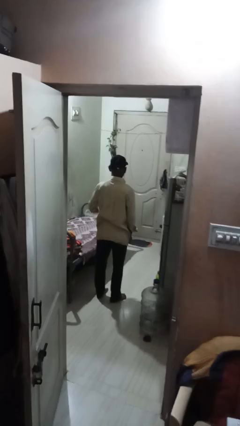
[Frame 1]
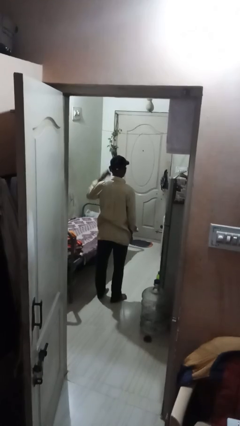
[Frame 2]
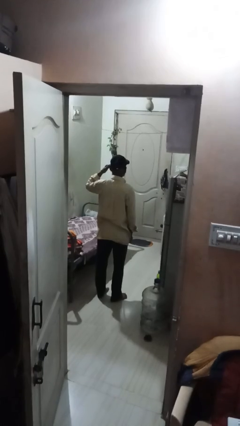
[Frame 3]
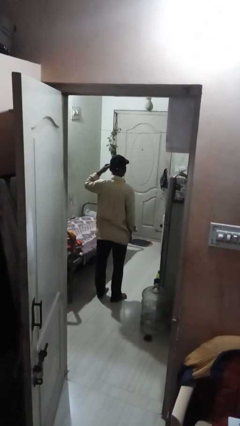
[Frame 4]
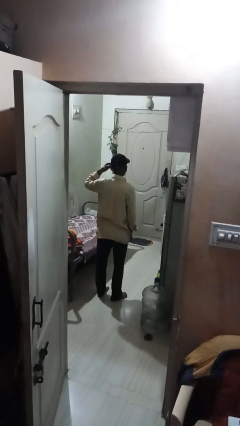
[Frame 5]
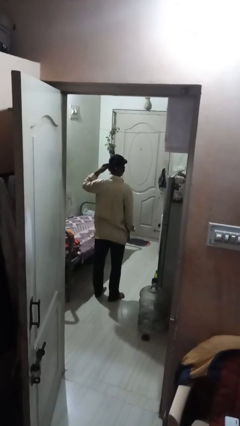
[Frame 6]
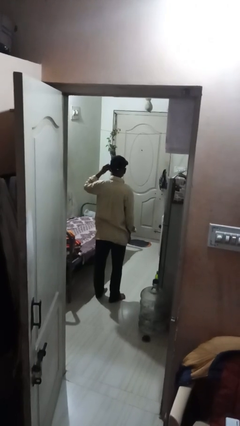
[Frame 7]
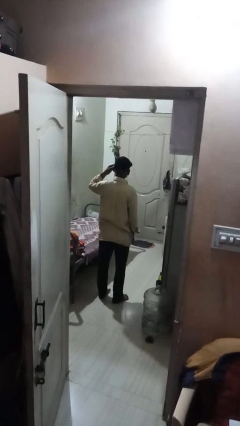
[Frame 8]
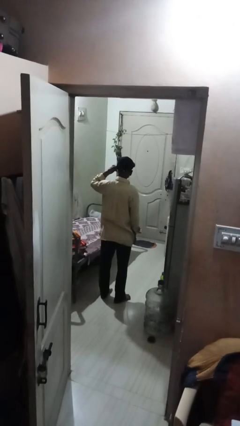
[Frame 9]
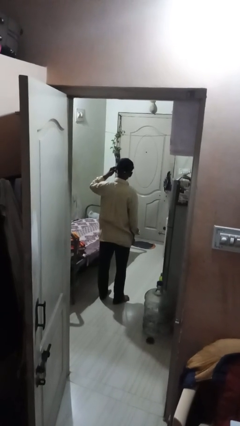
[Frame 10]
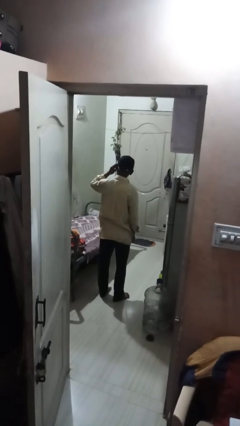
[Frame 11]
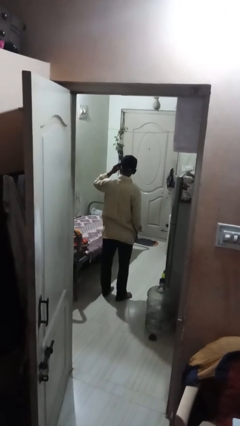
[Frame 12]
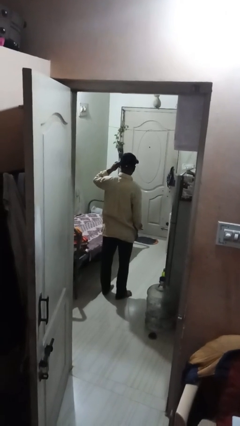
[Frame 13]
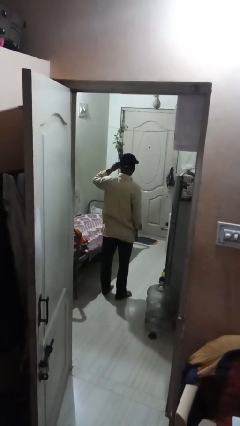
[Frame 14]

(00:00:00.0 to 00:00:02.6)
person touches earlobe

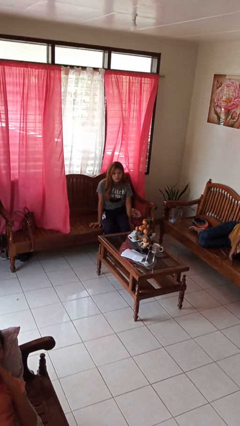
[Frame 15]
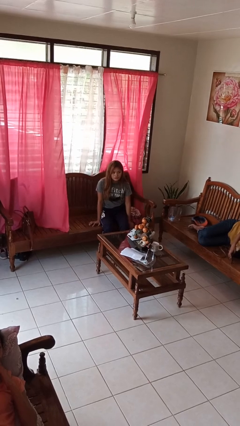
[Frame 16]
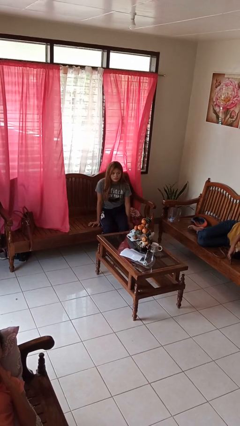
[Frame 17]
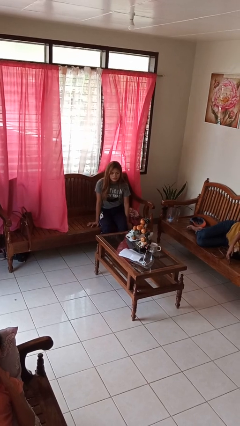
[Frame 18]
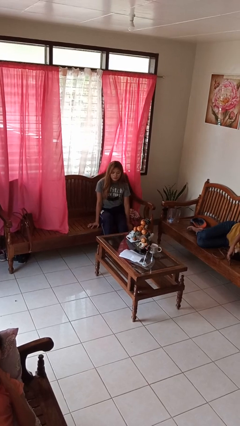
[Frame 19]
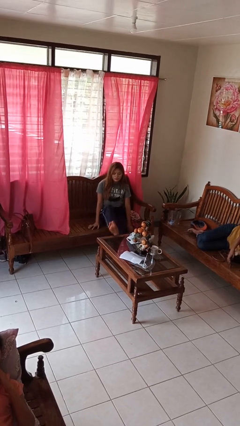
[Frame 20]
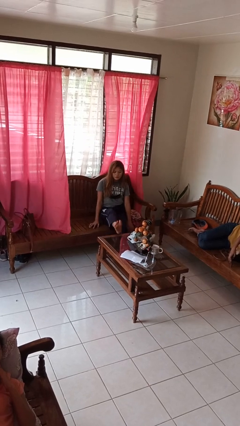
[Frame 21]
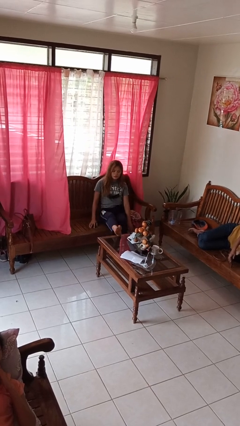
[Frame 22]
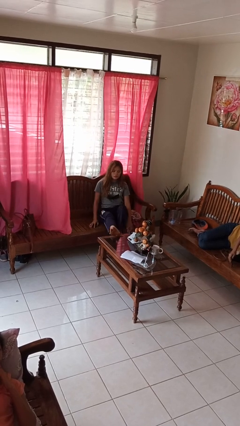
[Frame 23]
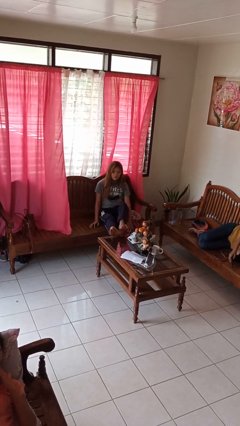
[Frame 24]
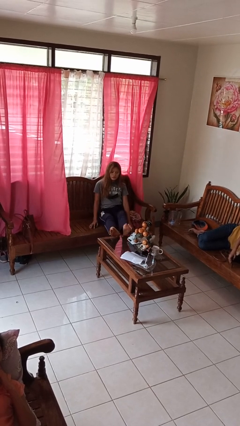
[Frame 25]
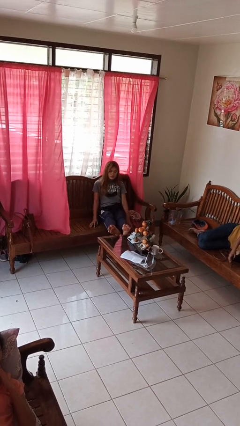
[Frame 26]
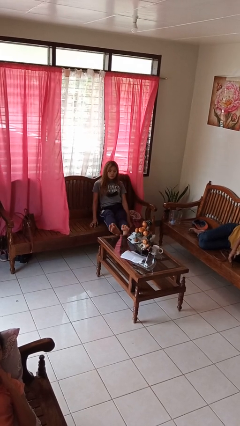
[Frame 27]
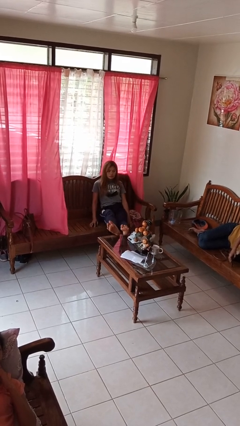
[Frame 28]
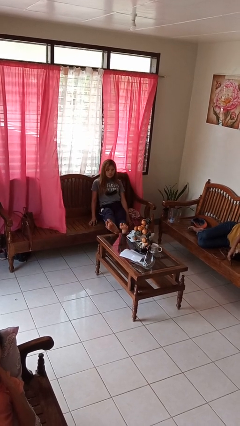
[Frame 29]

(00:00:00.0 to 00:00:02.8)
person puts feet up

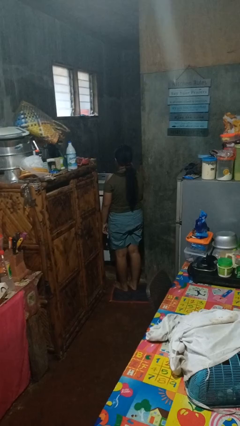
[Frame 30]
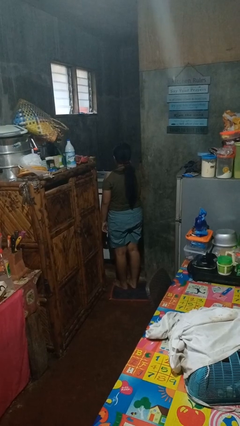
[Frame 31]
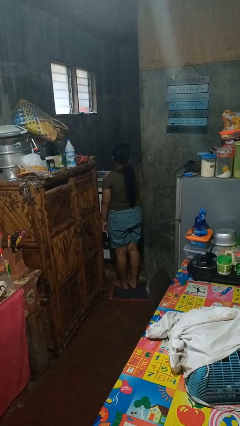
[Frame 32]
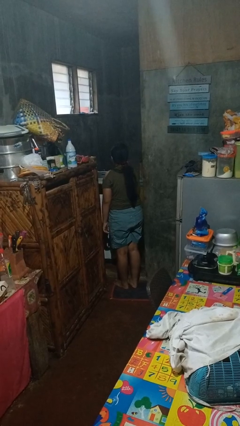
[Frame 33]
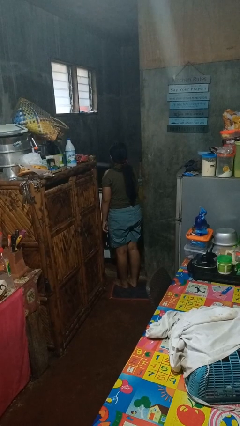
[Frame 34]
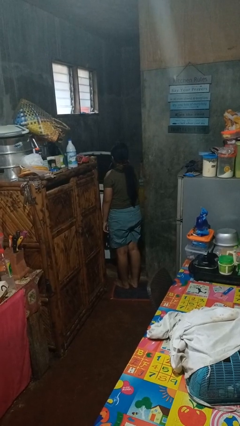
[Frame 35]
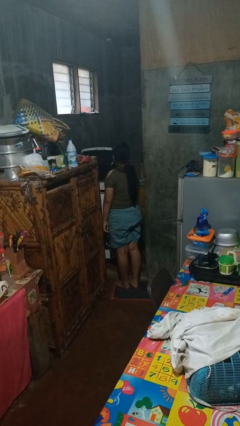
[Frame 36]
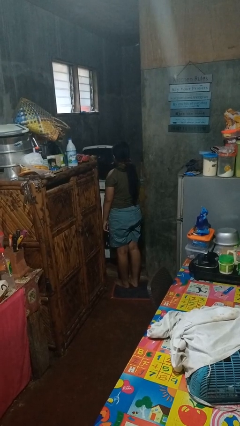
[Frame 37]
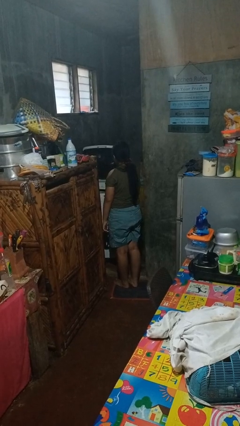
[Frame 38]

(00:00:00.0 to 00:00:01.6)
person opens clothes washer

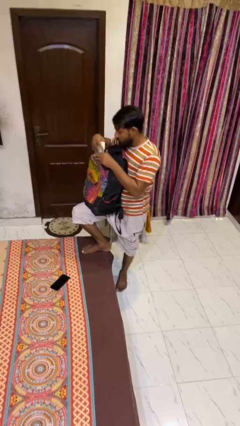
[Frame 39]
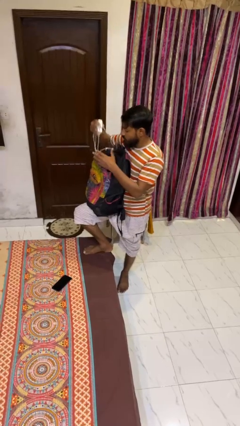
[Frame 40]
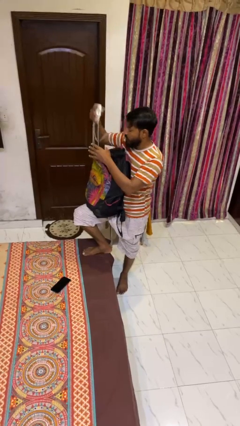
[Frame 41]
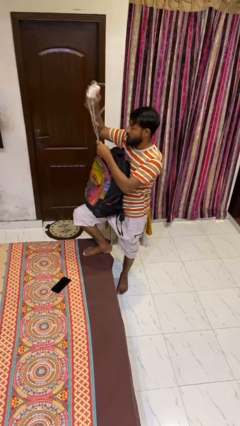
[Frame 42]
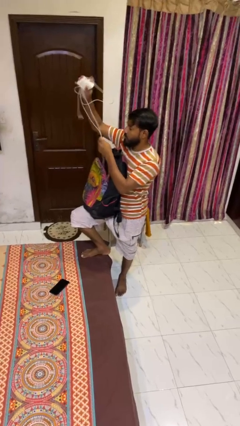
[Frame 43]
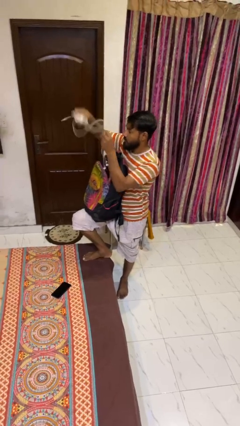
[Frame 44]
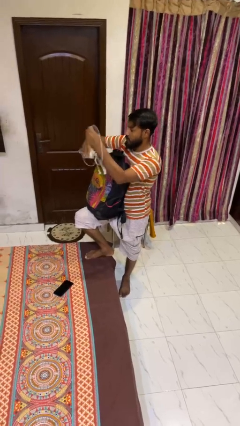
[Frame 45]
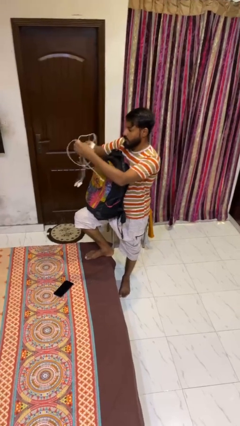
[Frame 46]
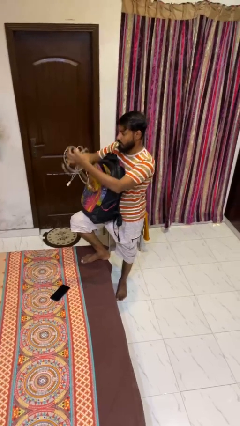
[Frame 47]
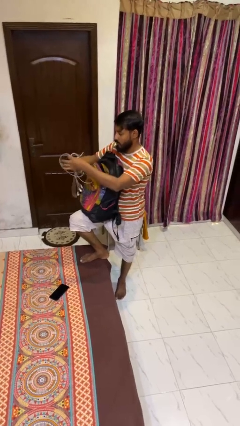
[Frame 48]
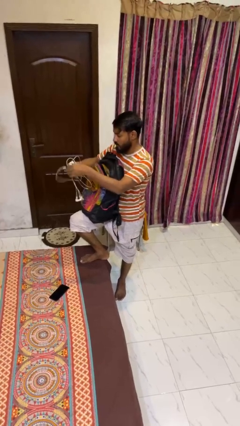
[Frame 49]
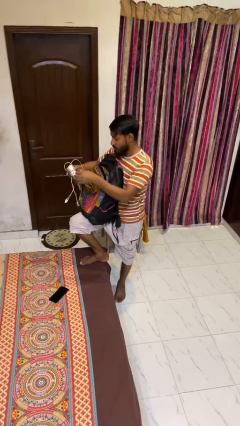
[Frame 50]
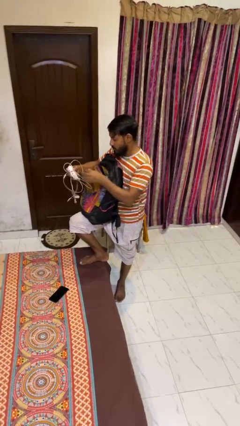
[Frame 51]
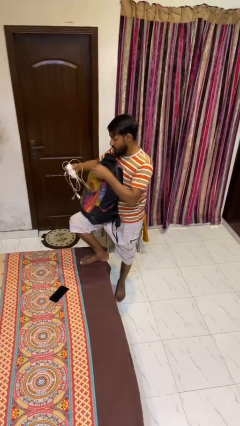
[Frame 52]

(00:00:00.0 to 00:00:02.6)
person takes object from backpack

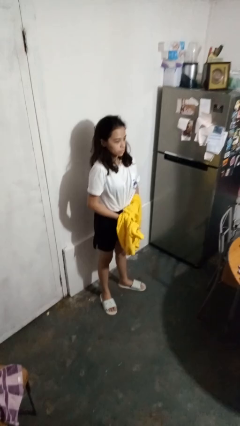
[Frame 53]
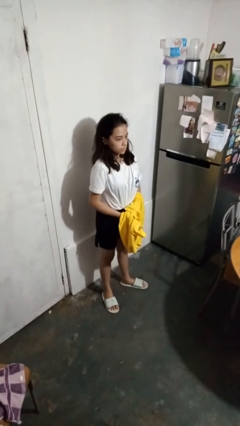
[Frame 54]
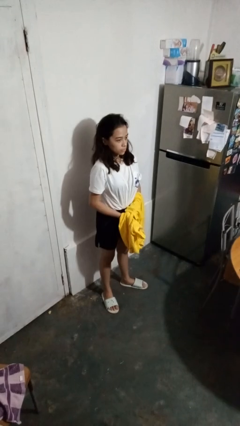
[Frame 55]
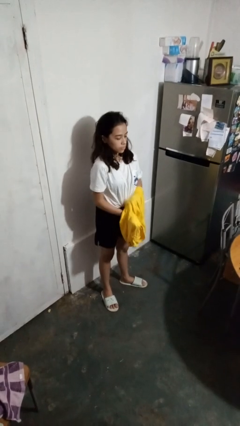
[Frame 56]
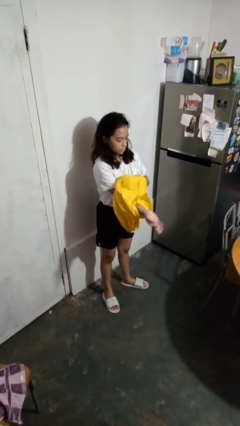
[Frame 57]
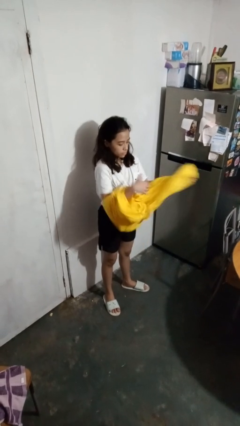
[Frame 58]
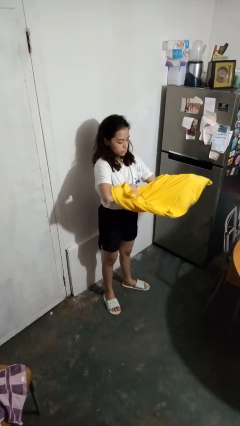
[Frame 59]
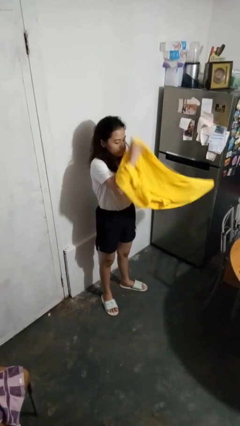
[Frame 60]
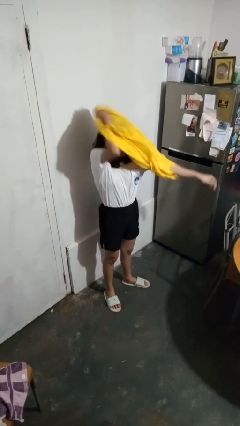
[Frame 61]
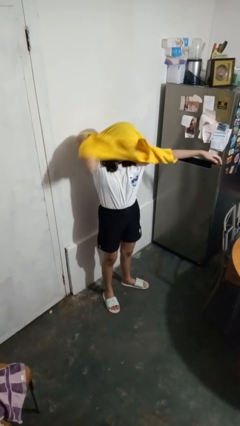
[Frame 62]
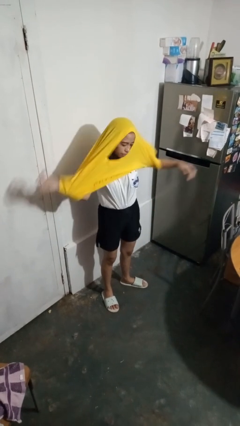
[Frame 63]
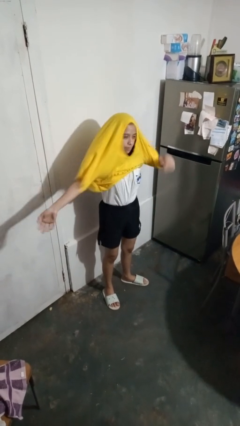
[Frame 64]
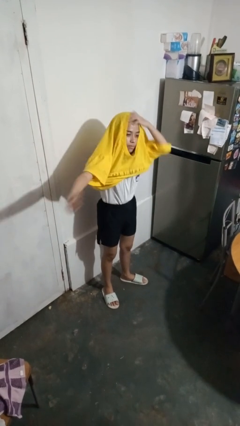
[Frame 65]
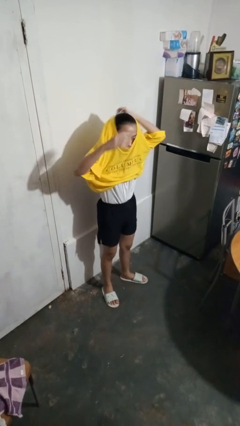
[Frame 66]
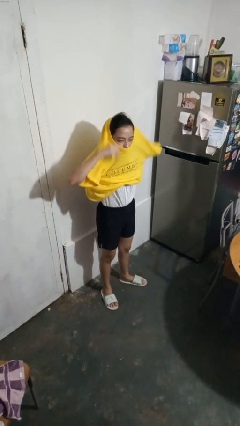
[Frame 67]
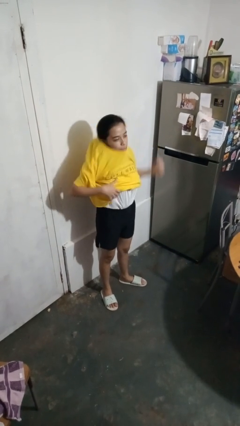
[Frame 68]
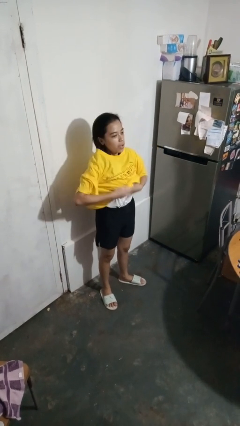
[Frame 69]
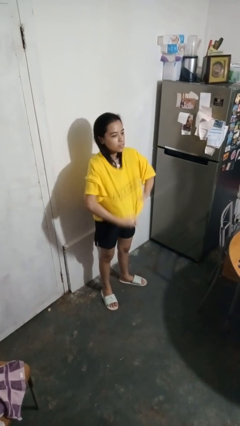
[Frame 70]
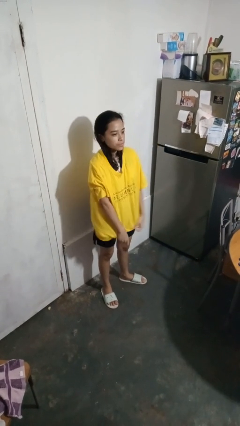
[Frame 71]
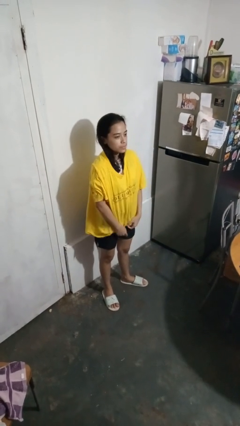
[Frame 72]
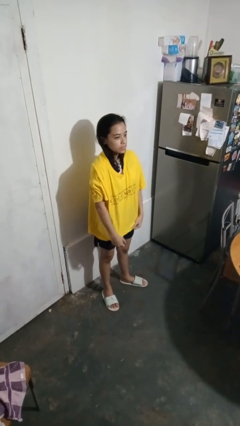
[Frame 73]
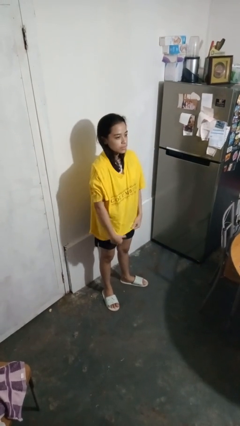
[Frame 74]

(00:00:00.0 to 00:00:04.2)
person puts on shirt

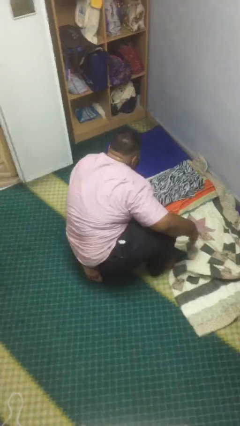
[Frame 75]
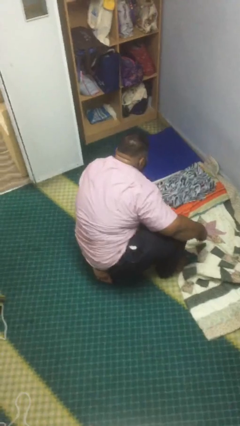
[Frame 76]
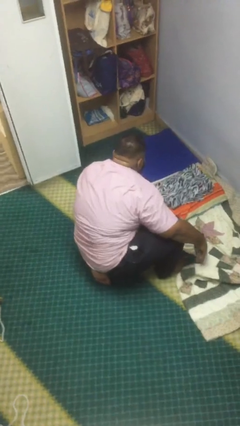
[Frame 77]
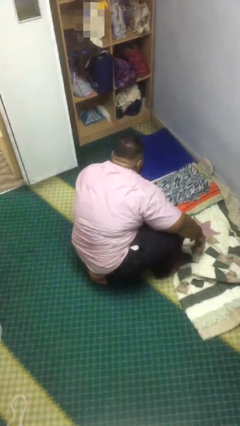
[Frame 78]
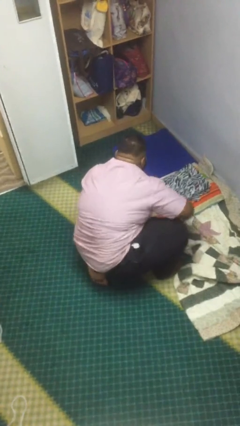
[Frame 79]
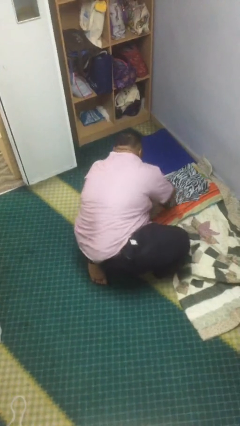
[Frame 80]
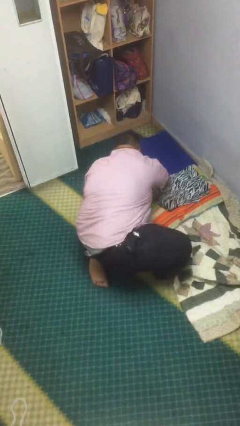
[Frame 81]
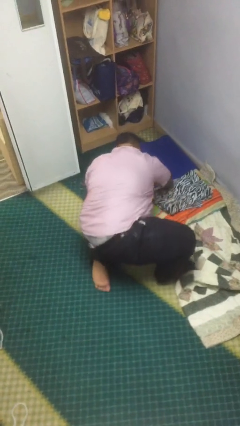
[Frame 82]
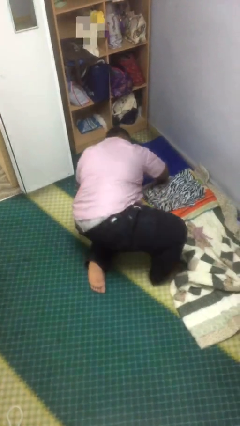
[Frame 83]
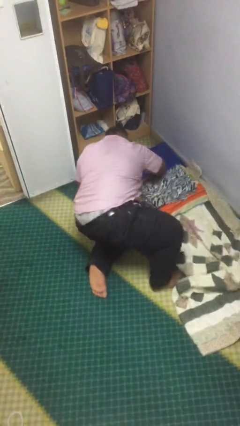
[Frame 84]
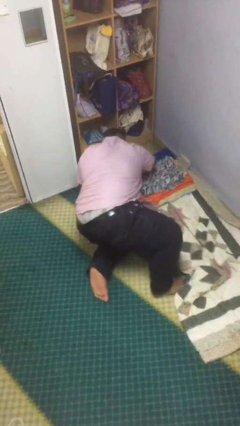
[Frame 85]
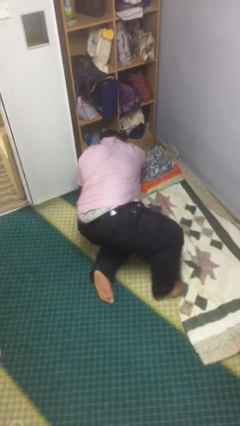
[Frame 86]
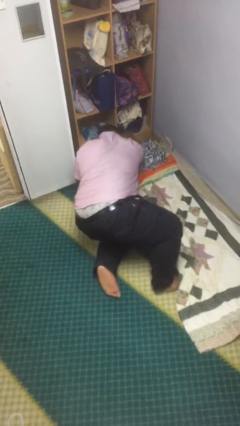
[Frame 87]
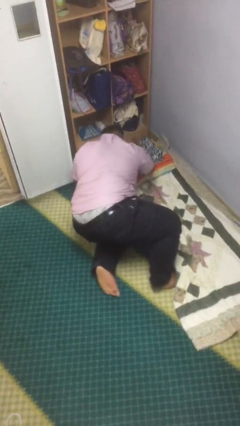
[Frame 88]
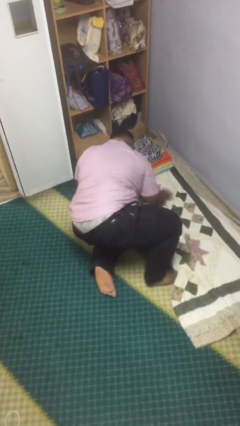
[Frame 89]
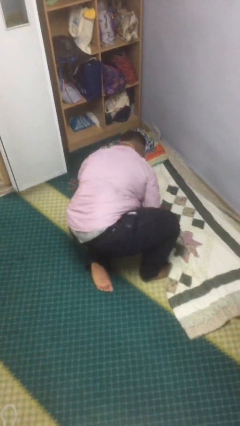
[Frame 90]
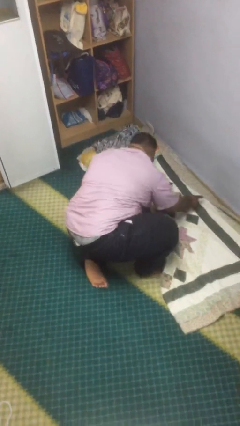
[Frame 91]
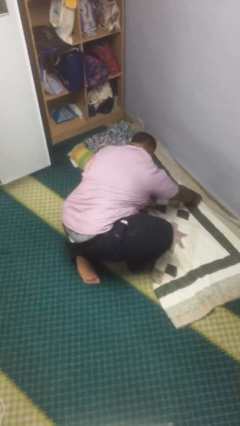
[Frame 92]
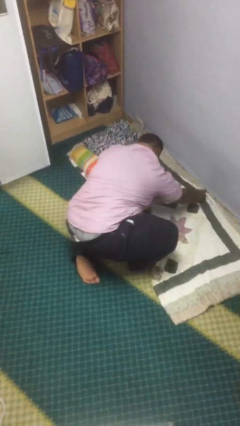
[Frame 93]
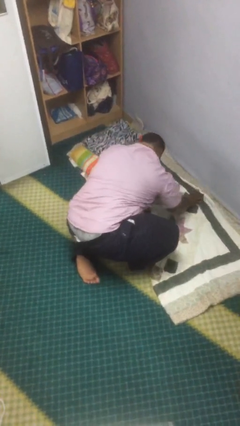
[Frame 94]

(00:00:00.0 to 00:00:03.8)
person makes bed
